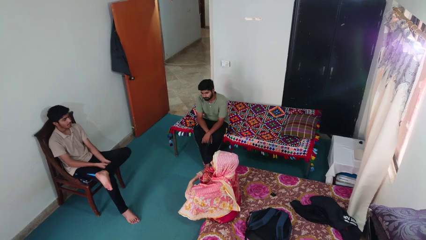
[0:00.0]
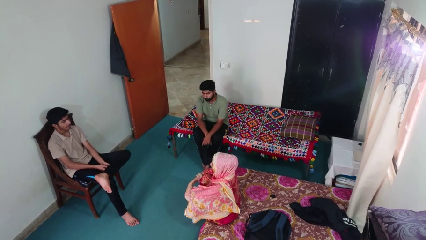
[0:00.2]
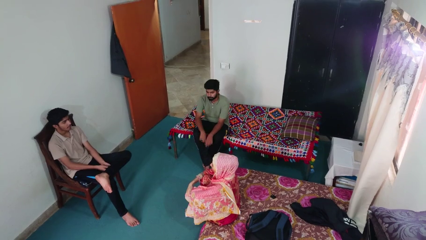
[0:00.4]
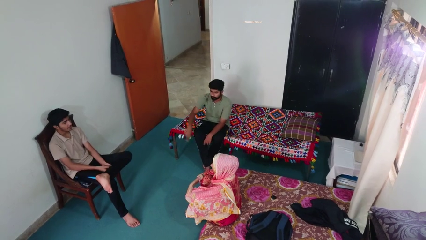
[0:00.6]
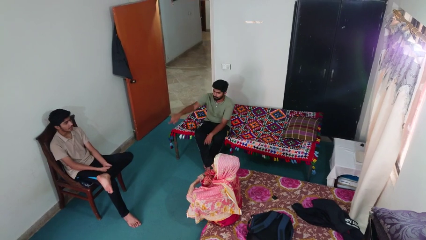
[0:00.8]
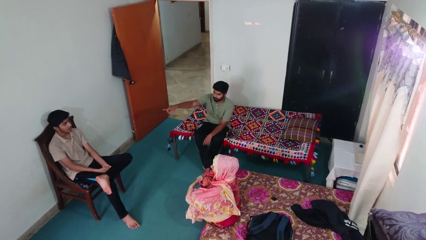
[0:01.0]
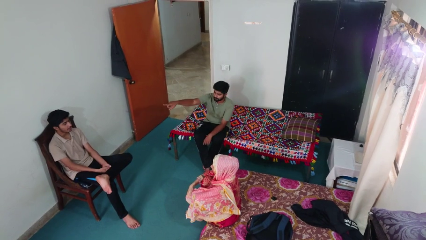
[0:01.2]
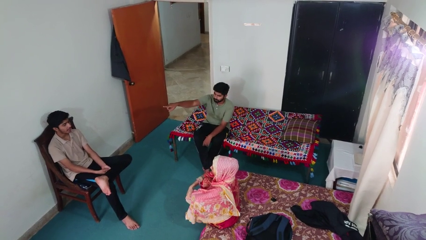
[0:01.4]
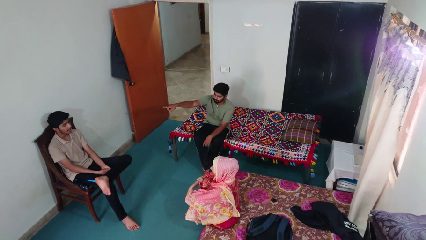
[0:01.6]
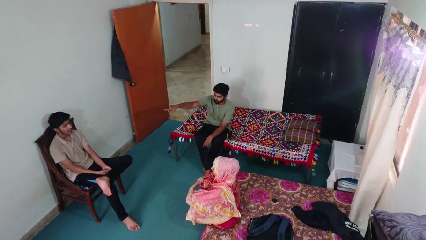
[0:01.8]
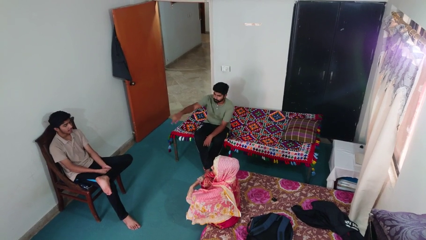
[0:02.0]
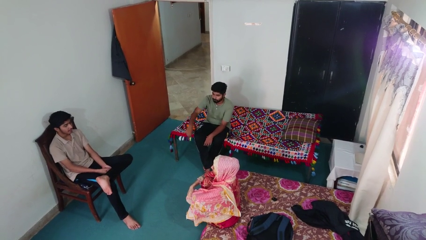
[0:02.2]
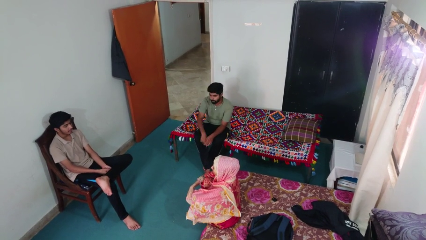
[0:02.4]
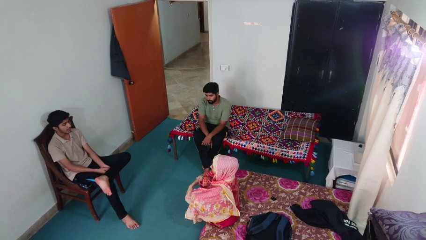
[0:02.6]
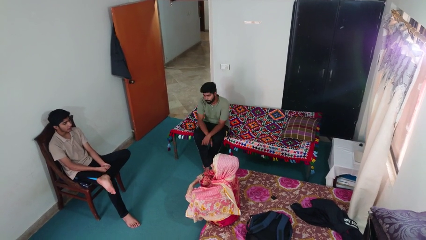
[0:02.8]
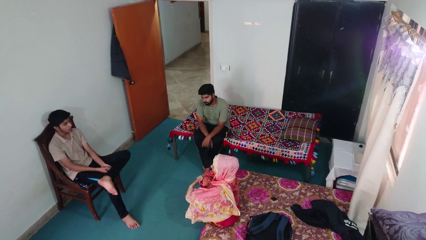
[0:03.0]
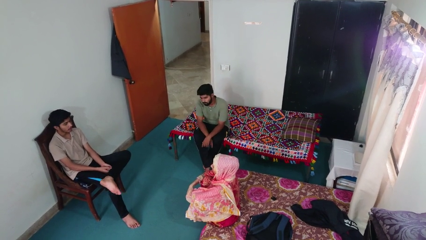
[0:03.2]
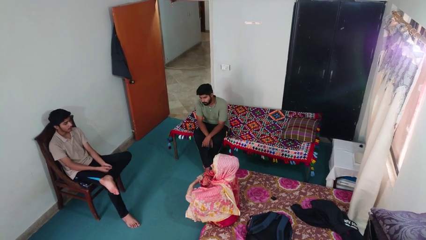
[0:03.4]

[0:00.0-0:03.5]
person points at person

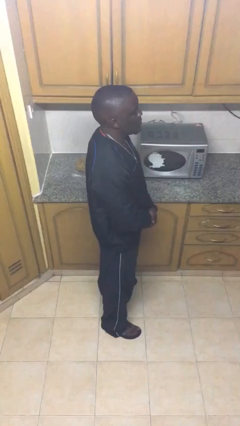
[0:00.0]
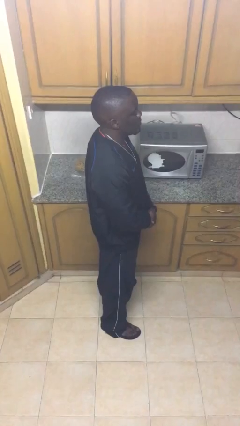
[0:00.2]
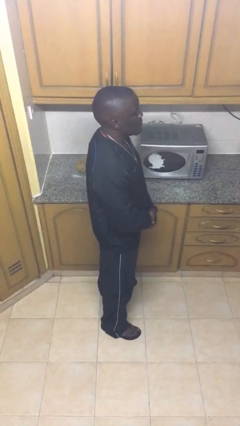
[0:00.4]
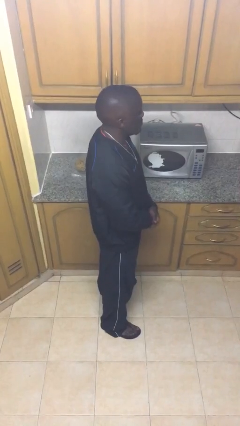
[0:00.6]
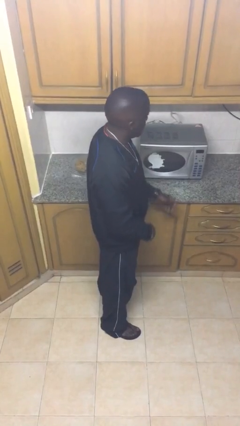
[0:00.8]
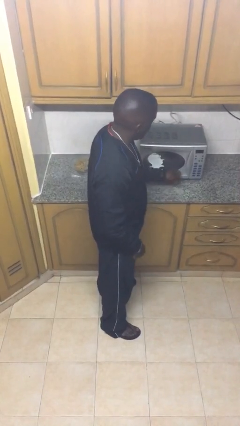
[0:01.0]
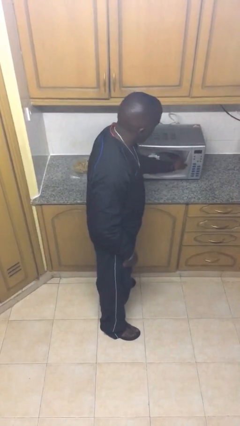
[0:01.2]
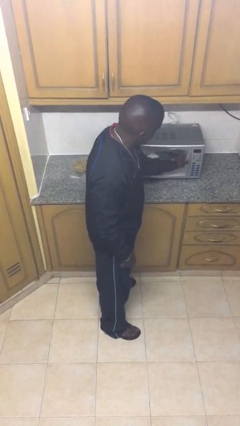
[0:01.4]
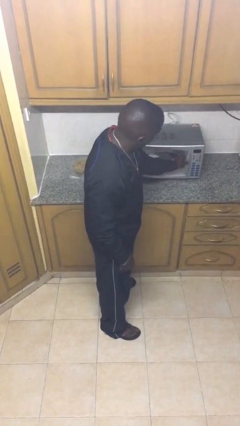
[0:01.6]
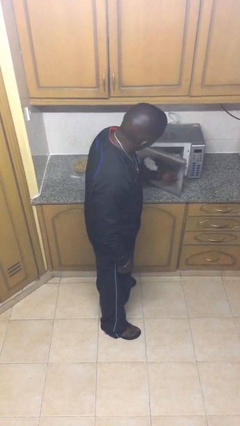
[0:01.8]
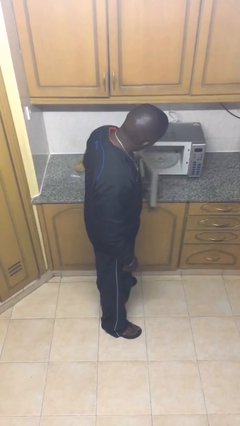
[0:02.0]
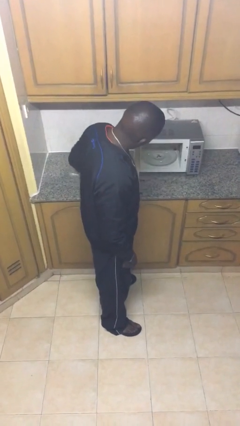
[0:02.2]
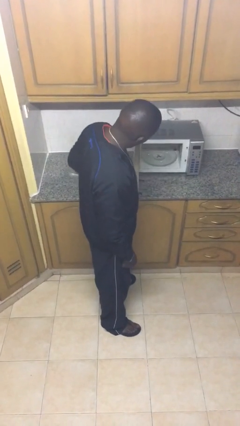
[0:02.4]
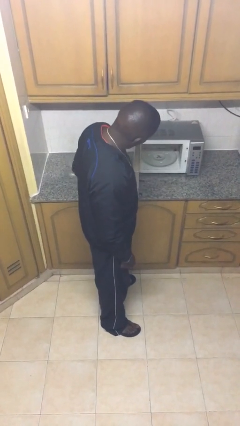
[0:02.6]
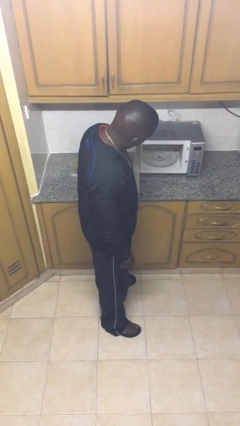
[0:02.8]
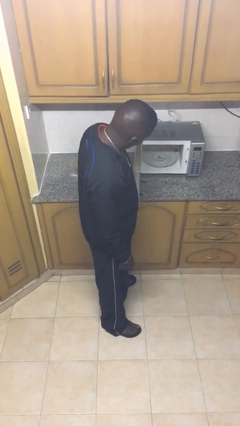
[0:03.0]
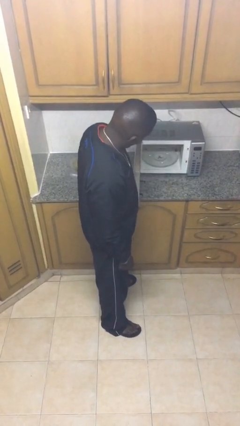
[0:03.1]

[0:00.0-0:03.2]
person opens microwave

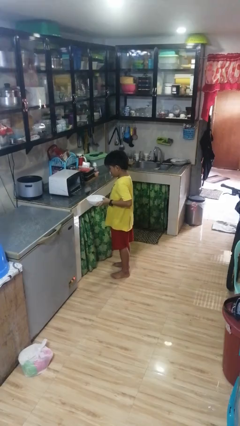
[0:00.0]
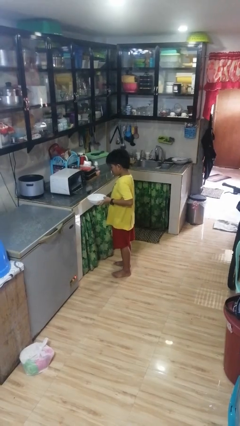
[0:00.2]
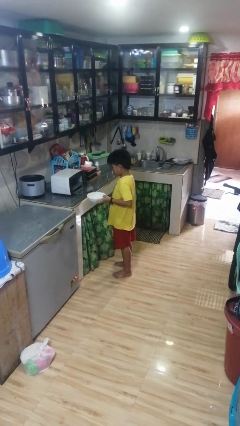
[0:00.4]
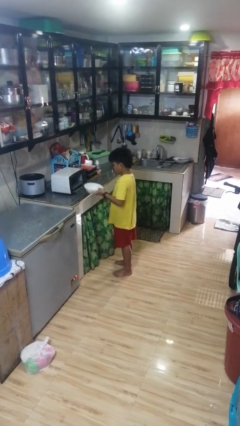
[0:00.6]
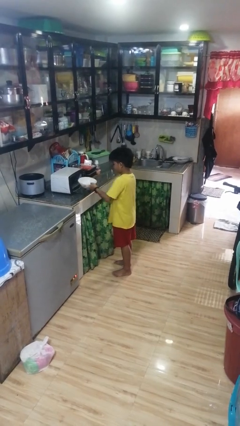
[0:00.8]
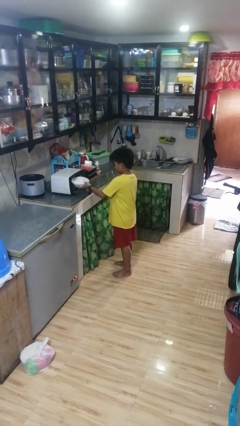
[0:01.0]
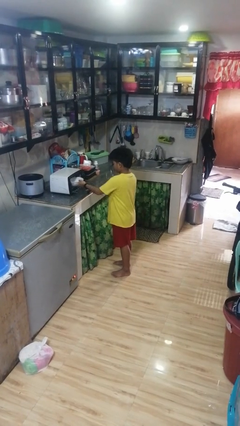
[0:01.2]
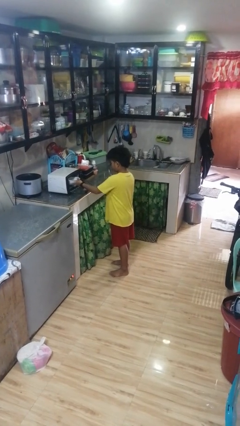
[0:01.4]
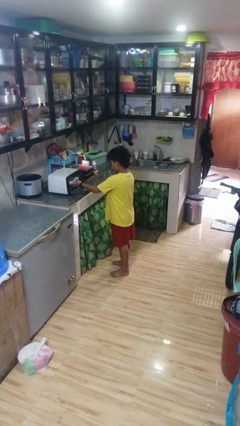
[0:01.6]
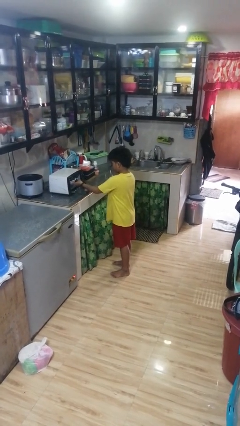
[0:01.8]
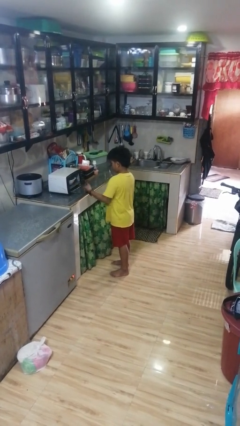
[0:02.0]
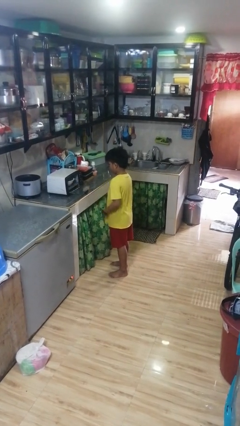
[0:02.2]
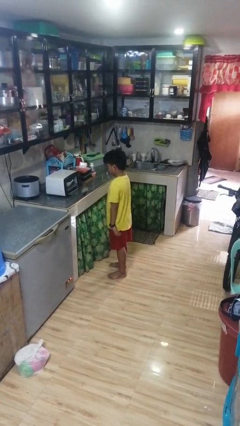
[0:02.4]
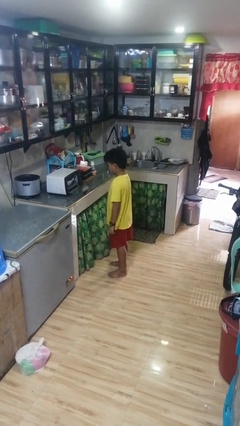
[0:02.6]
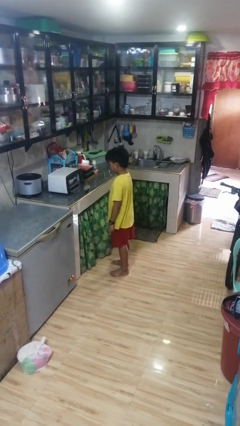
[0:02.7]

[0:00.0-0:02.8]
person puts object into microwave

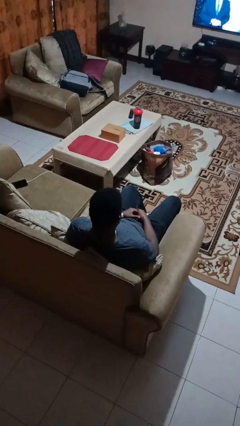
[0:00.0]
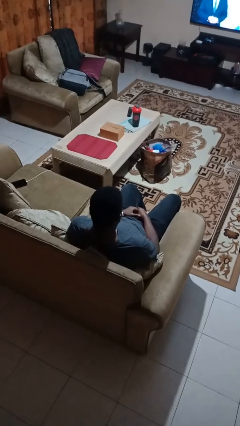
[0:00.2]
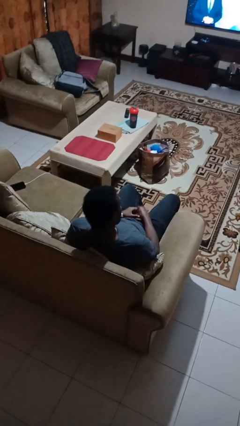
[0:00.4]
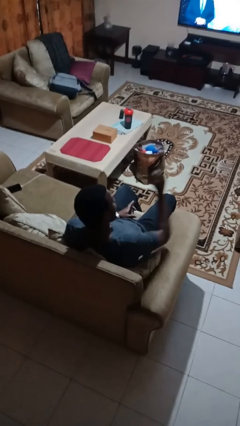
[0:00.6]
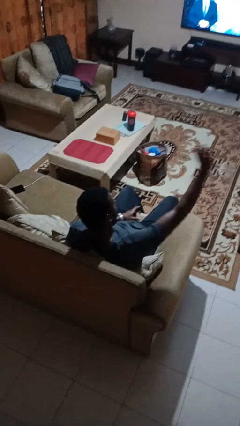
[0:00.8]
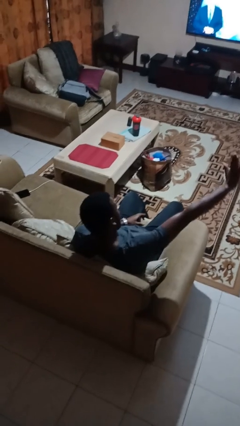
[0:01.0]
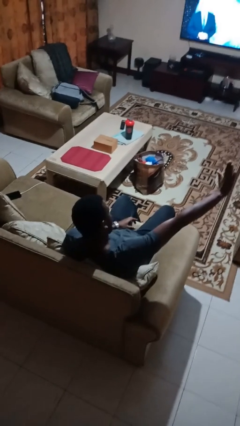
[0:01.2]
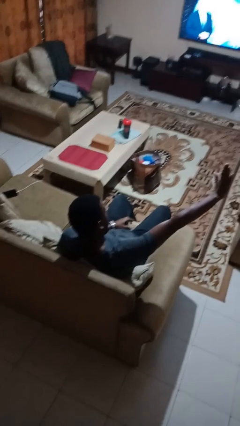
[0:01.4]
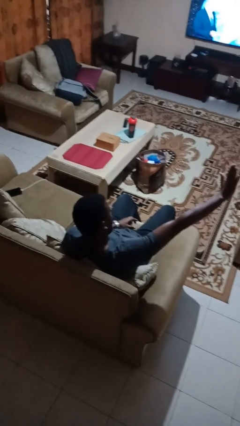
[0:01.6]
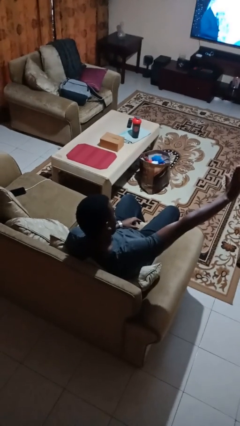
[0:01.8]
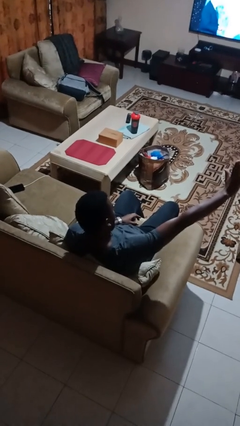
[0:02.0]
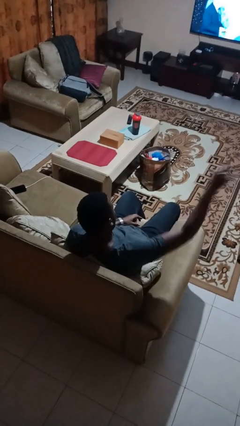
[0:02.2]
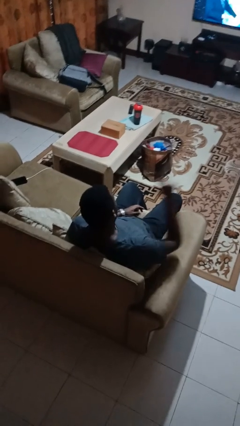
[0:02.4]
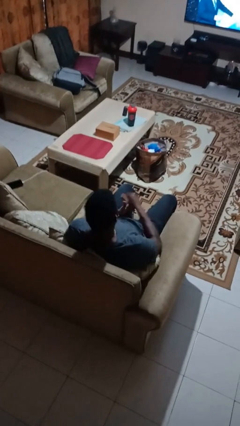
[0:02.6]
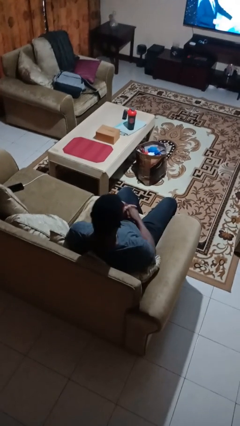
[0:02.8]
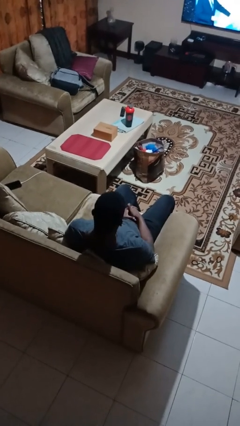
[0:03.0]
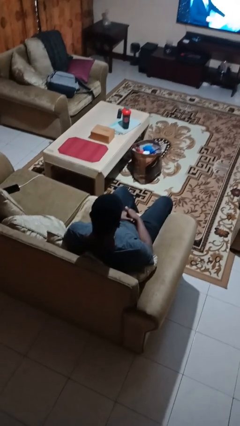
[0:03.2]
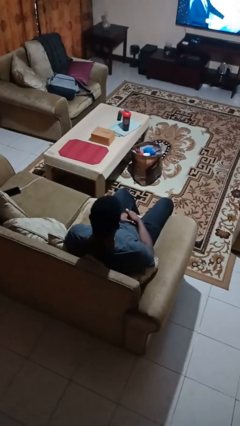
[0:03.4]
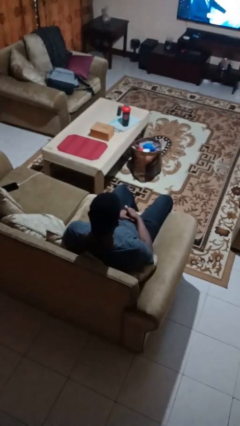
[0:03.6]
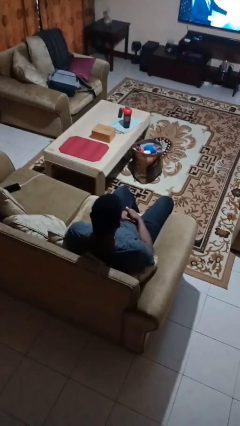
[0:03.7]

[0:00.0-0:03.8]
person gestures stop

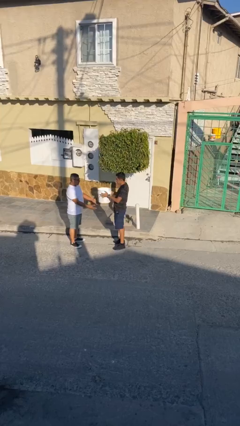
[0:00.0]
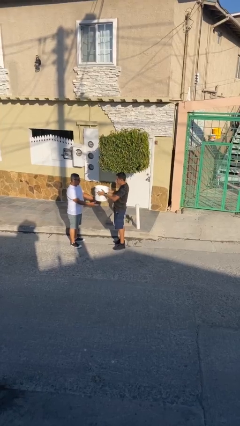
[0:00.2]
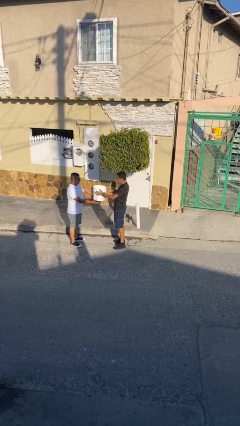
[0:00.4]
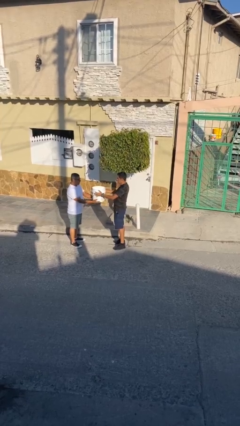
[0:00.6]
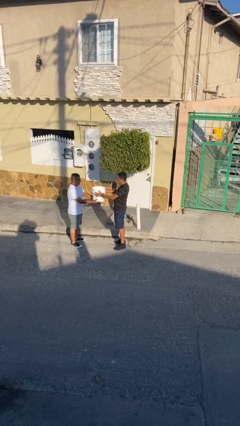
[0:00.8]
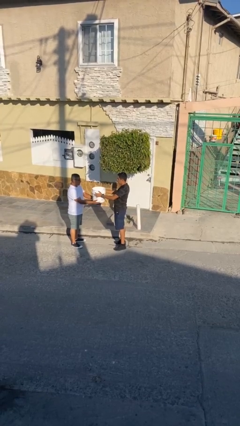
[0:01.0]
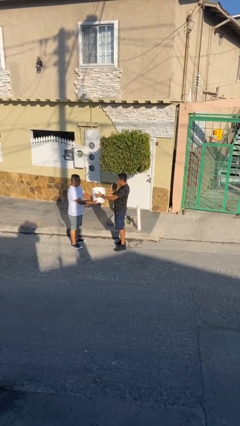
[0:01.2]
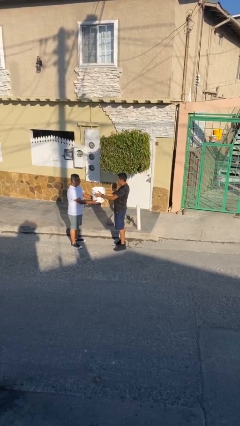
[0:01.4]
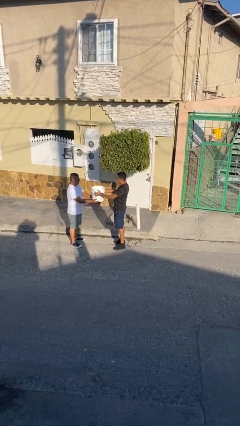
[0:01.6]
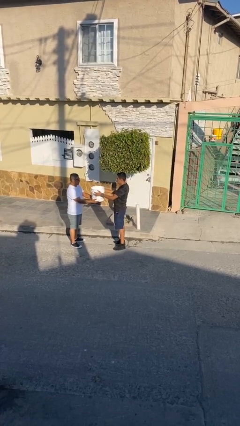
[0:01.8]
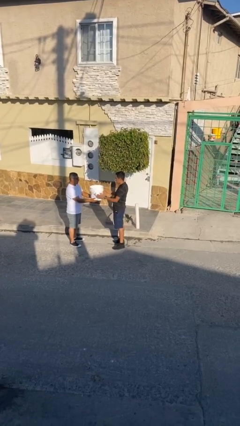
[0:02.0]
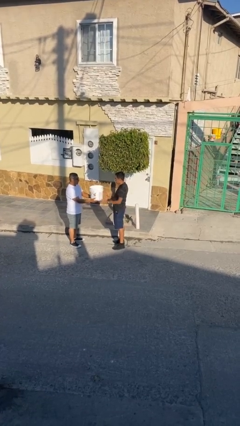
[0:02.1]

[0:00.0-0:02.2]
person transfers object to person

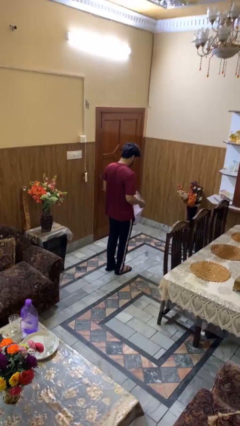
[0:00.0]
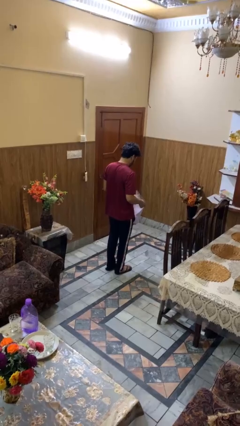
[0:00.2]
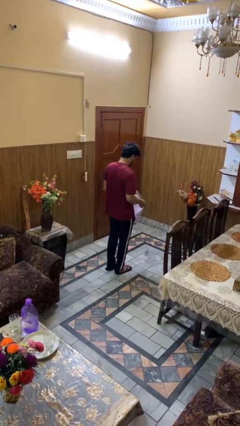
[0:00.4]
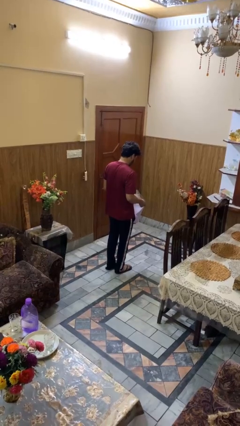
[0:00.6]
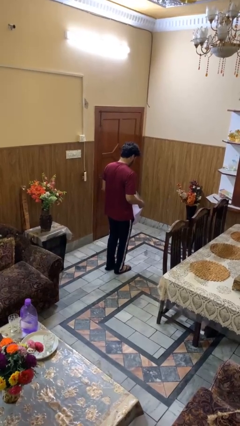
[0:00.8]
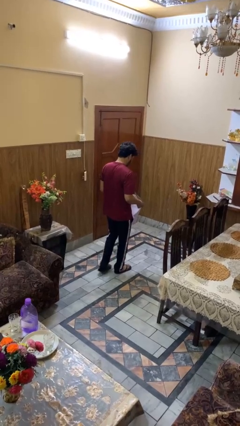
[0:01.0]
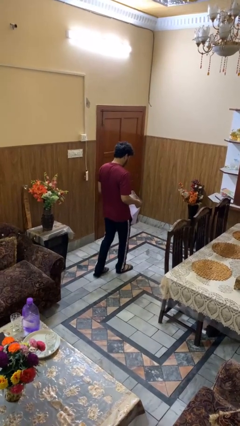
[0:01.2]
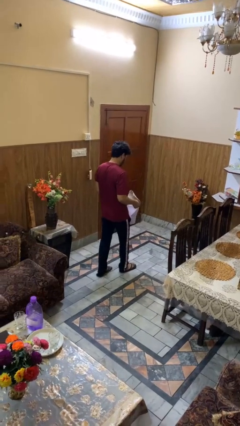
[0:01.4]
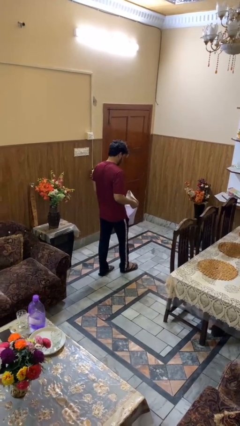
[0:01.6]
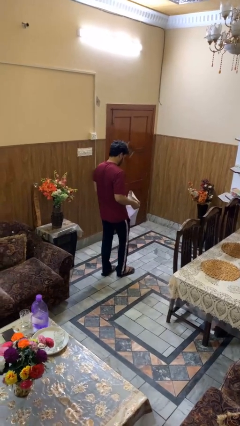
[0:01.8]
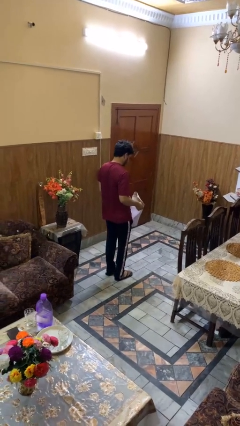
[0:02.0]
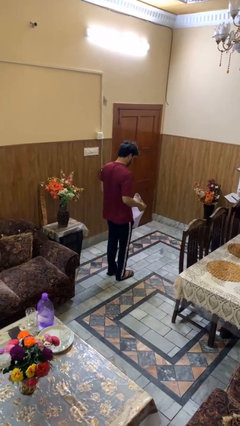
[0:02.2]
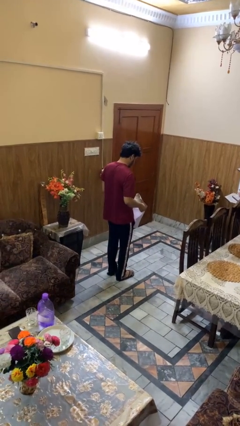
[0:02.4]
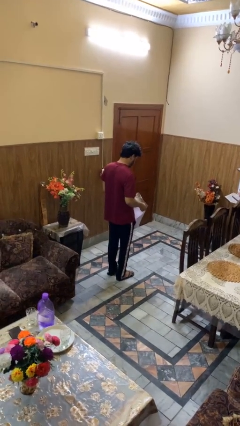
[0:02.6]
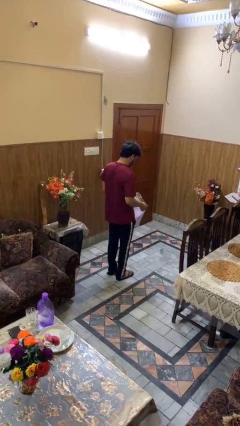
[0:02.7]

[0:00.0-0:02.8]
person carries laundry basket
